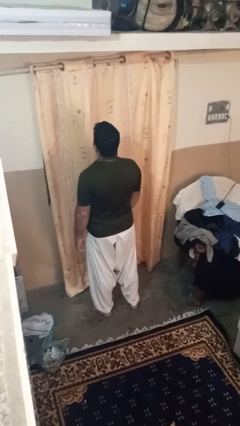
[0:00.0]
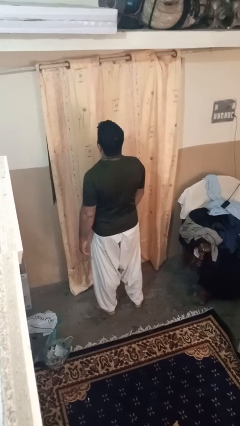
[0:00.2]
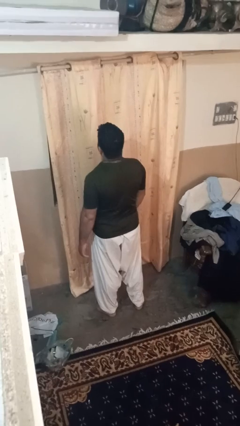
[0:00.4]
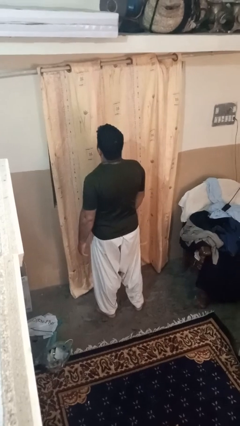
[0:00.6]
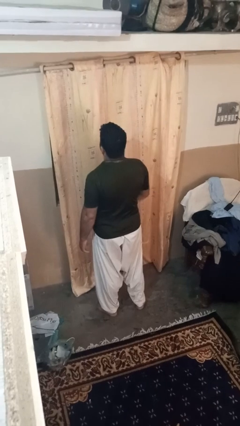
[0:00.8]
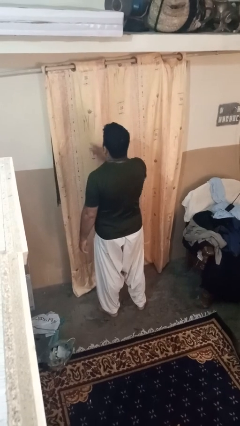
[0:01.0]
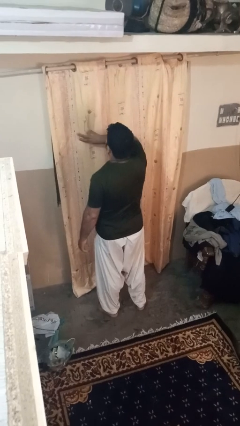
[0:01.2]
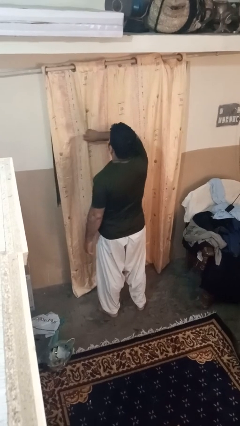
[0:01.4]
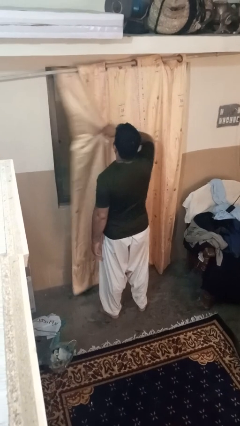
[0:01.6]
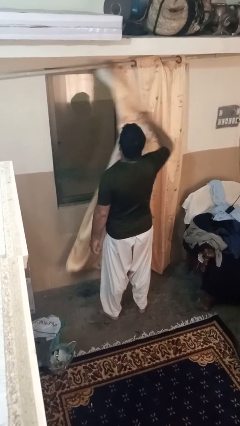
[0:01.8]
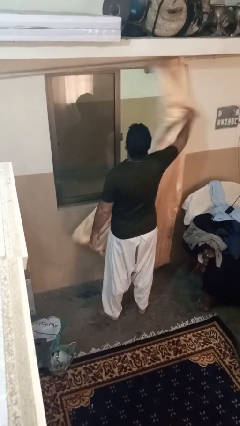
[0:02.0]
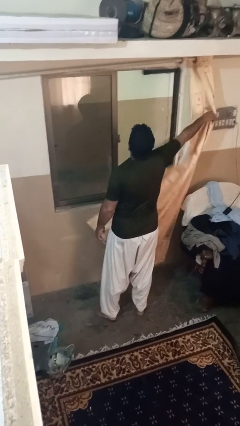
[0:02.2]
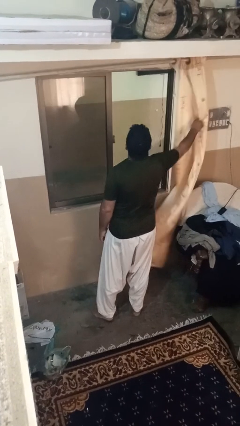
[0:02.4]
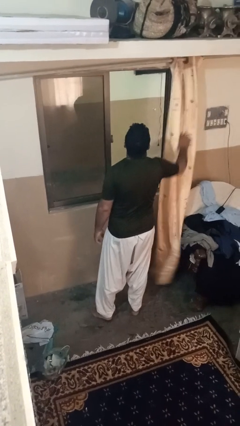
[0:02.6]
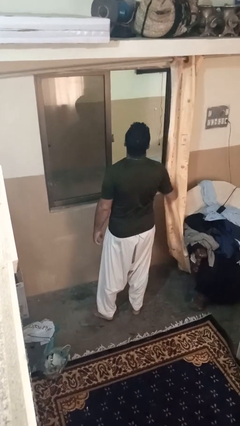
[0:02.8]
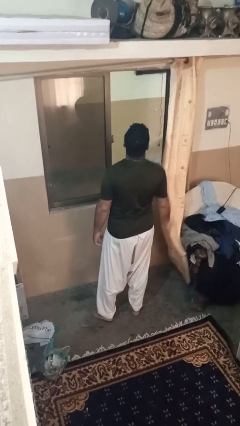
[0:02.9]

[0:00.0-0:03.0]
person opens curtains

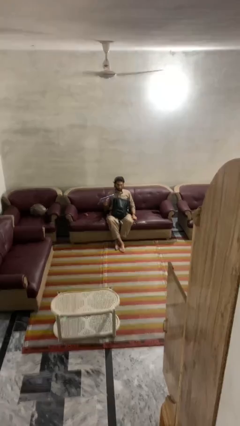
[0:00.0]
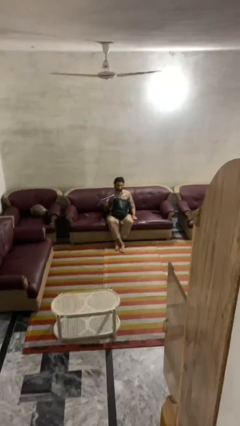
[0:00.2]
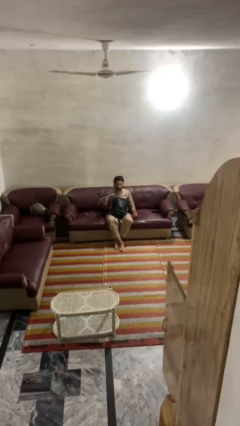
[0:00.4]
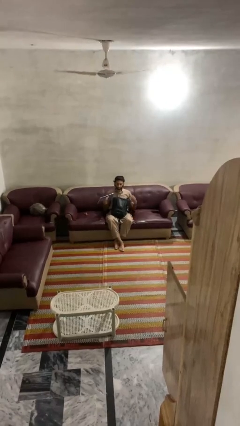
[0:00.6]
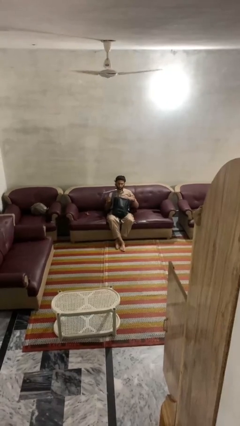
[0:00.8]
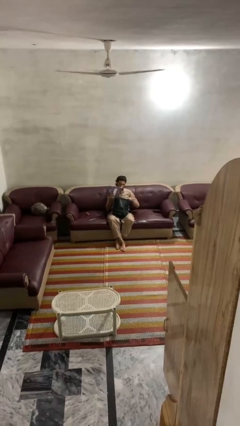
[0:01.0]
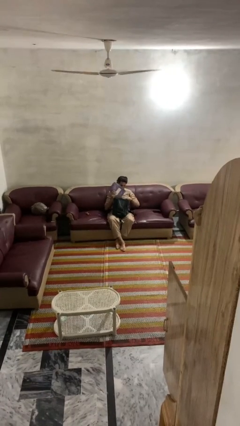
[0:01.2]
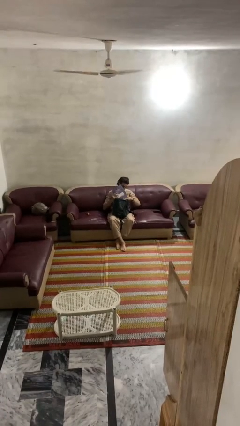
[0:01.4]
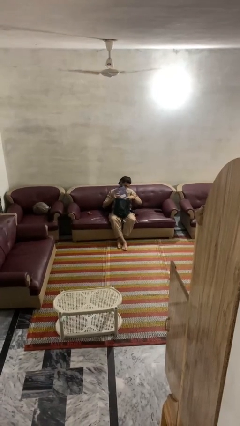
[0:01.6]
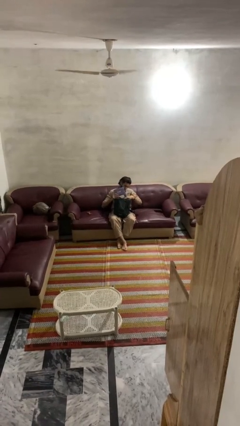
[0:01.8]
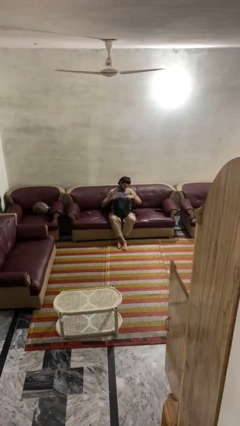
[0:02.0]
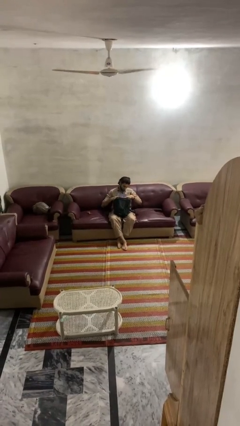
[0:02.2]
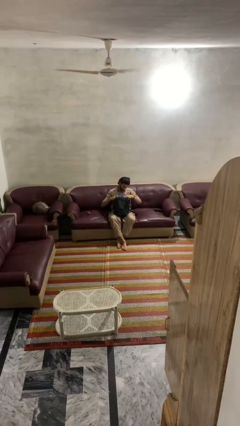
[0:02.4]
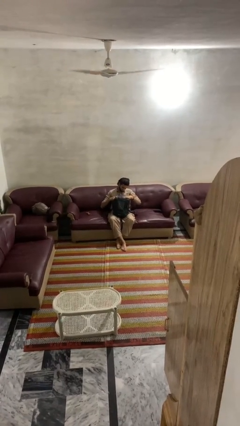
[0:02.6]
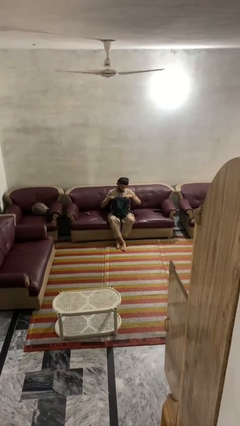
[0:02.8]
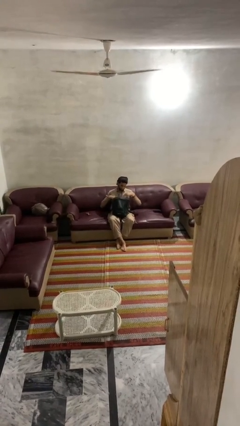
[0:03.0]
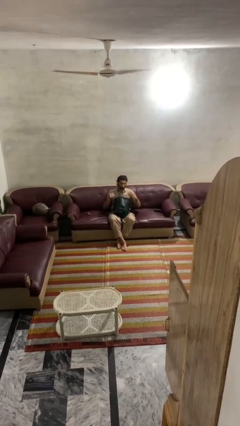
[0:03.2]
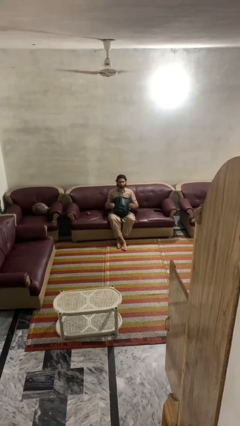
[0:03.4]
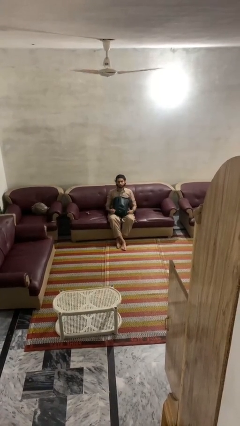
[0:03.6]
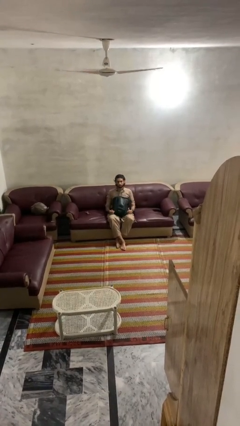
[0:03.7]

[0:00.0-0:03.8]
person puts object into backpack

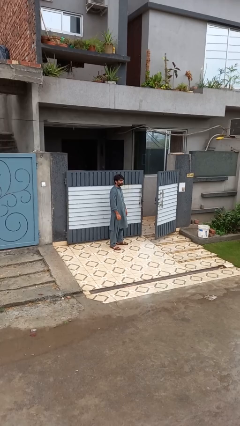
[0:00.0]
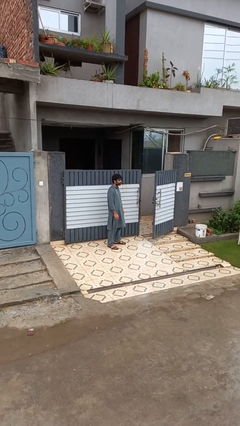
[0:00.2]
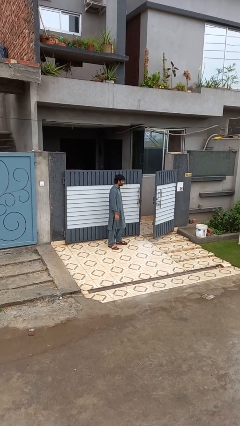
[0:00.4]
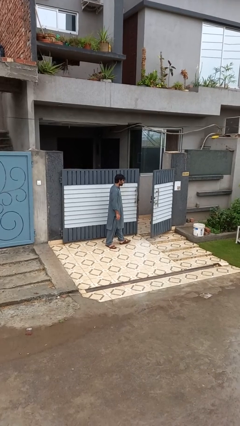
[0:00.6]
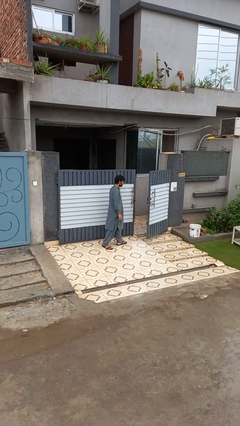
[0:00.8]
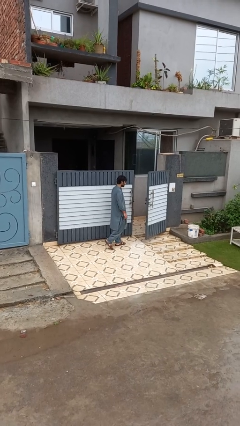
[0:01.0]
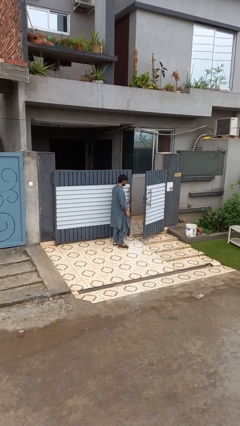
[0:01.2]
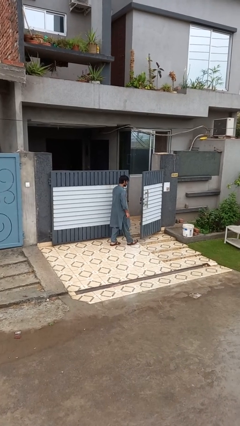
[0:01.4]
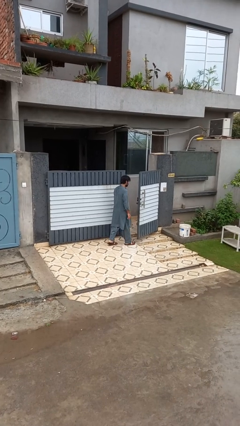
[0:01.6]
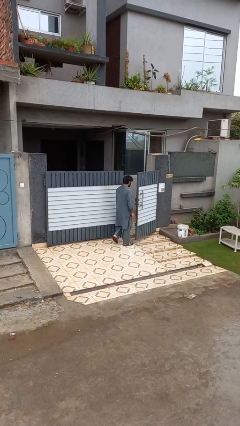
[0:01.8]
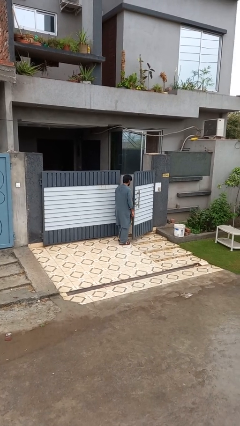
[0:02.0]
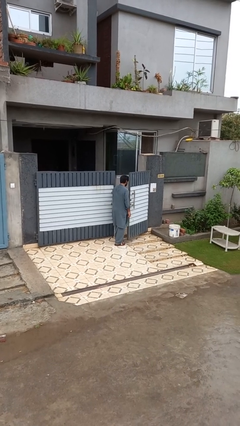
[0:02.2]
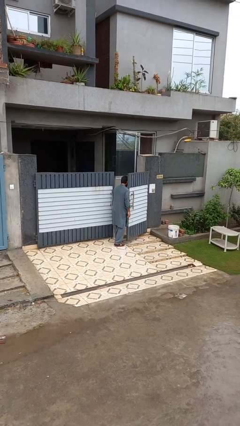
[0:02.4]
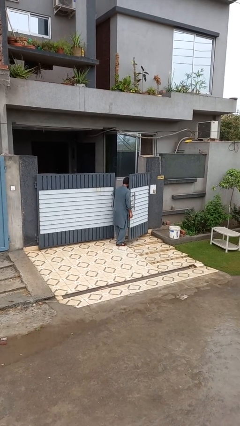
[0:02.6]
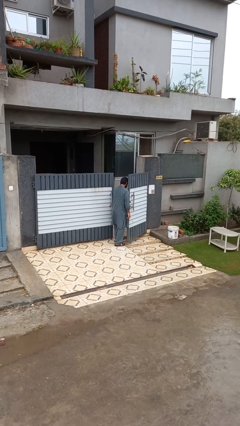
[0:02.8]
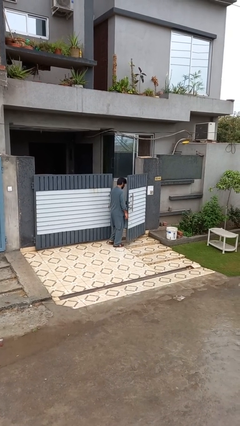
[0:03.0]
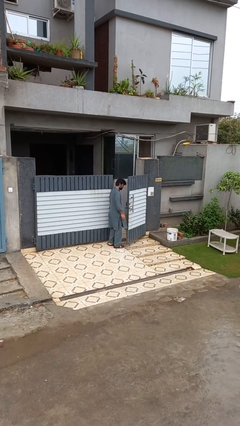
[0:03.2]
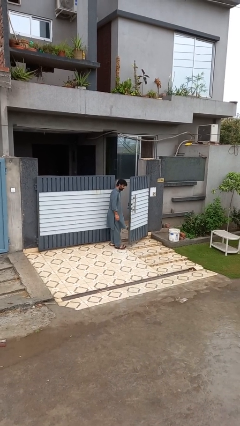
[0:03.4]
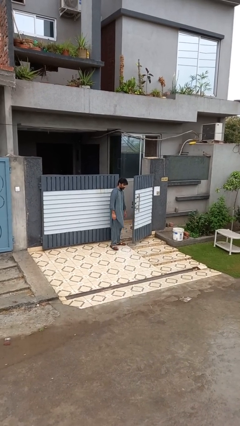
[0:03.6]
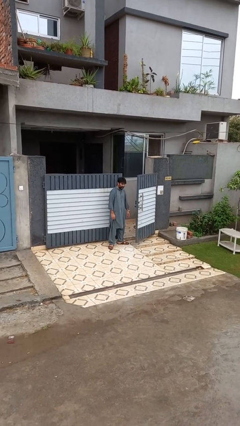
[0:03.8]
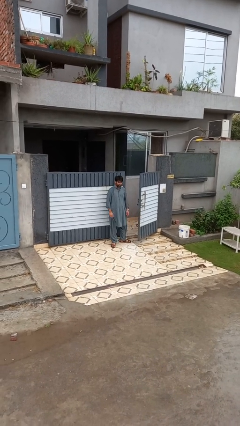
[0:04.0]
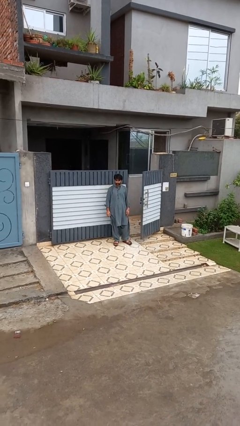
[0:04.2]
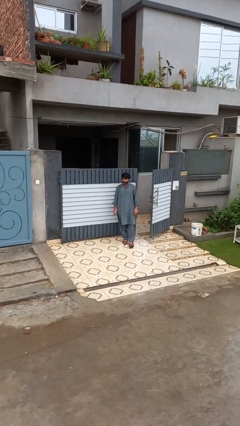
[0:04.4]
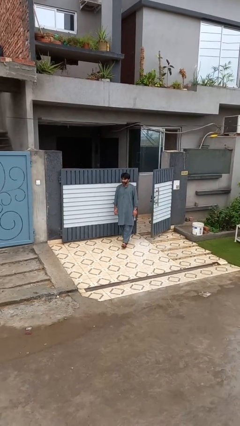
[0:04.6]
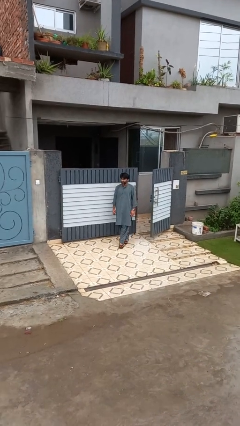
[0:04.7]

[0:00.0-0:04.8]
person bumps into wall

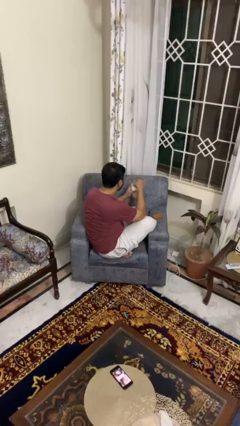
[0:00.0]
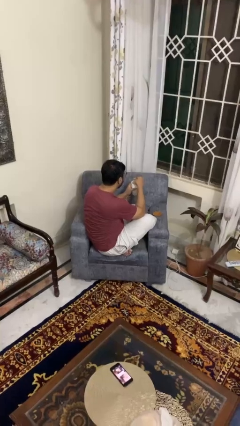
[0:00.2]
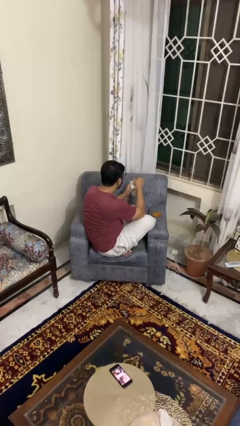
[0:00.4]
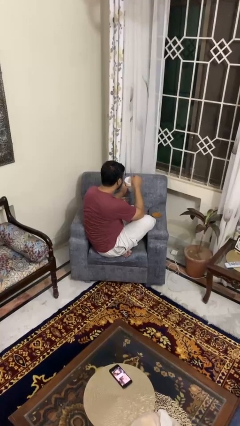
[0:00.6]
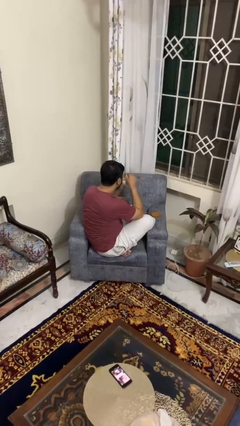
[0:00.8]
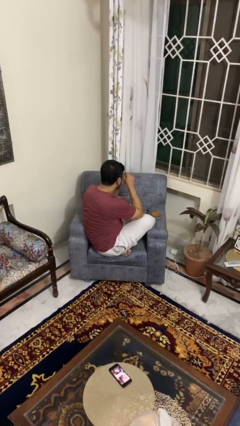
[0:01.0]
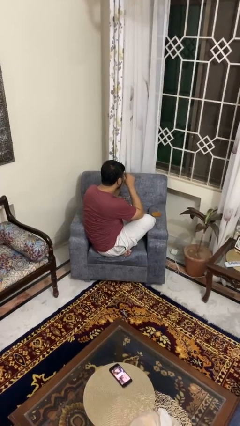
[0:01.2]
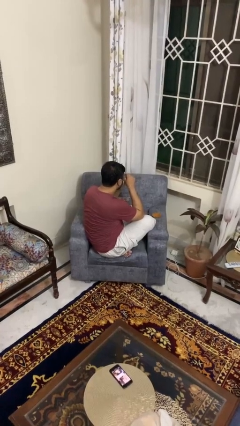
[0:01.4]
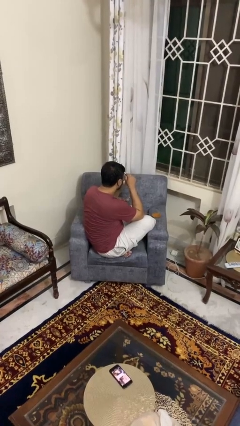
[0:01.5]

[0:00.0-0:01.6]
person drinks from mug

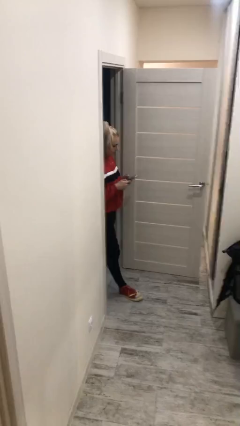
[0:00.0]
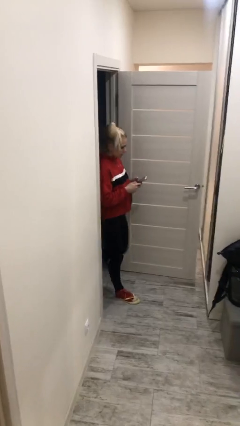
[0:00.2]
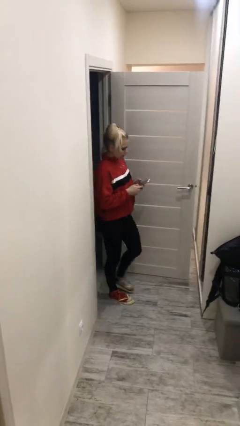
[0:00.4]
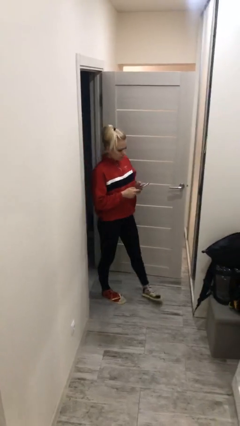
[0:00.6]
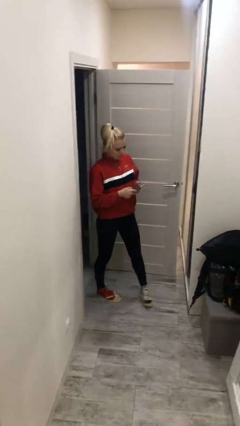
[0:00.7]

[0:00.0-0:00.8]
person enters scene through structure

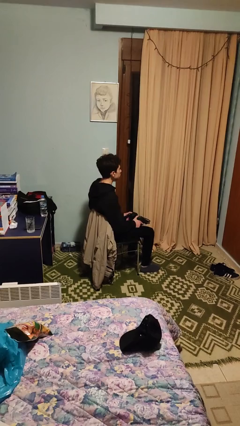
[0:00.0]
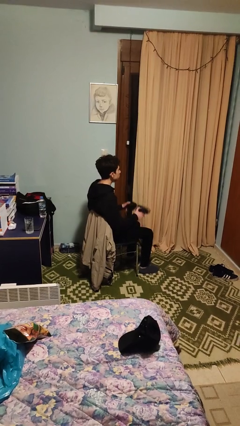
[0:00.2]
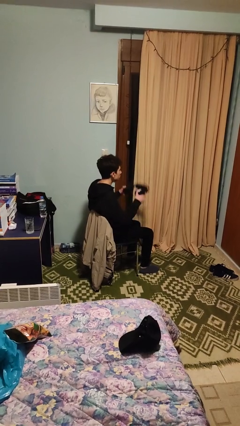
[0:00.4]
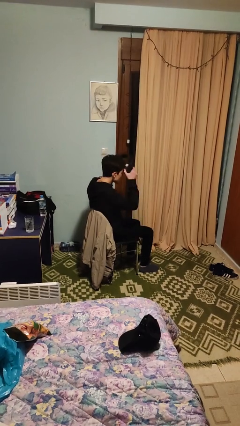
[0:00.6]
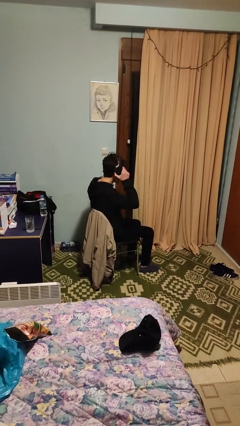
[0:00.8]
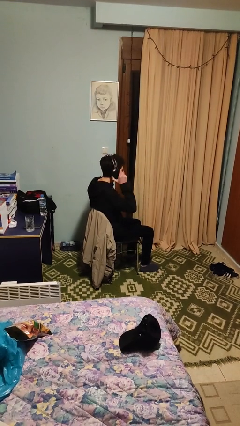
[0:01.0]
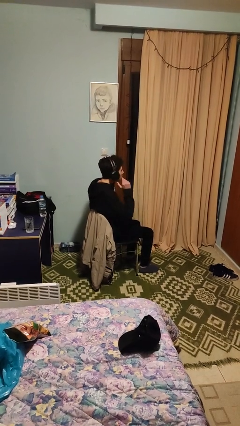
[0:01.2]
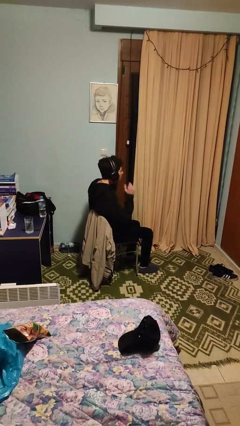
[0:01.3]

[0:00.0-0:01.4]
person puts on headphones

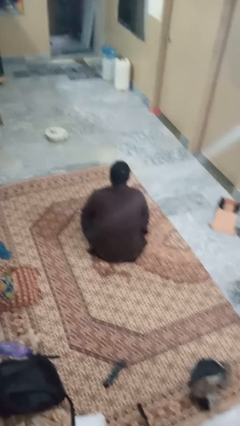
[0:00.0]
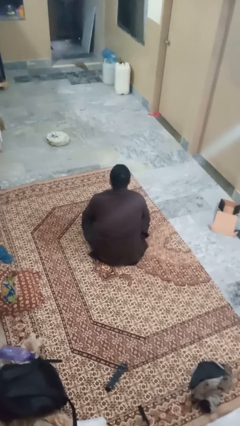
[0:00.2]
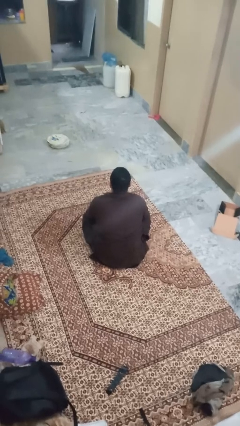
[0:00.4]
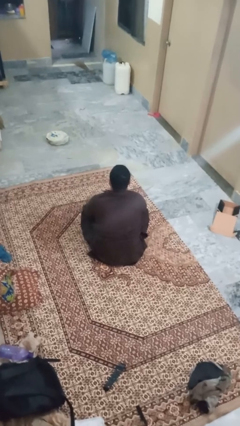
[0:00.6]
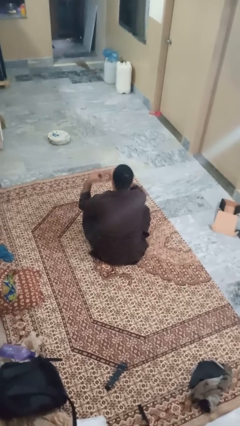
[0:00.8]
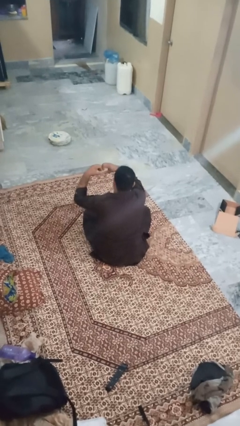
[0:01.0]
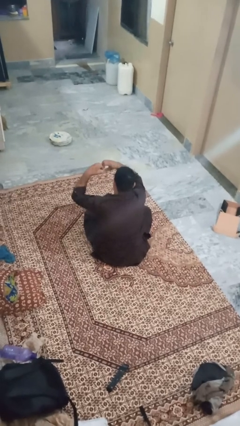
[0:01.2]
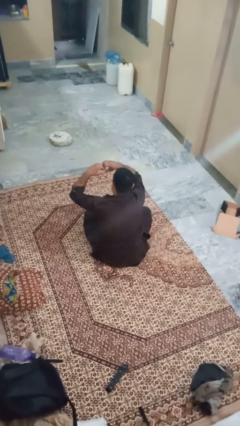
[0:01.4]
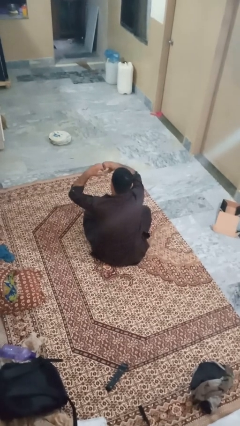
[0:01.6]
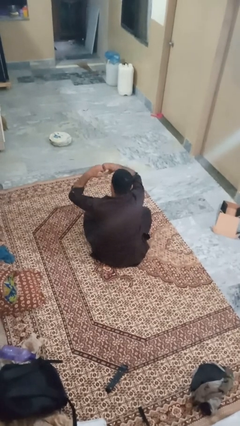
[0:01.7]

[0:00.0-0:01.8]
person gestures heart
